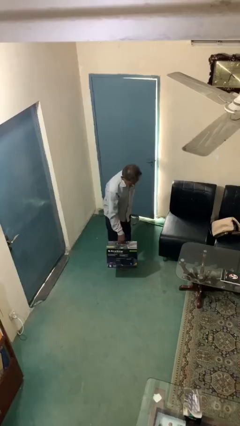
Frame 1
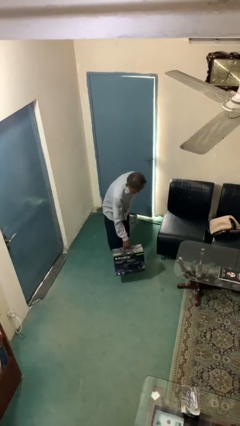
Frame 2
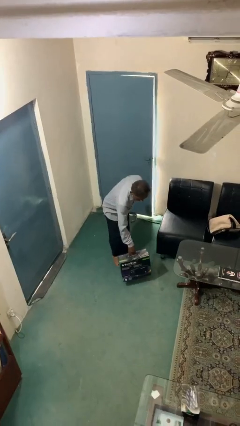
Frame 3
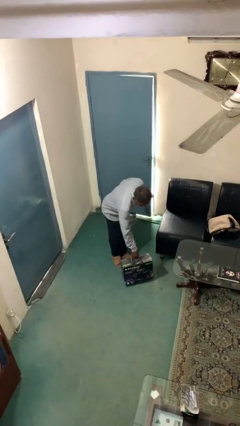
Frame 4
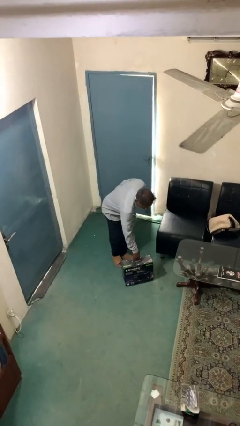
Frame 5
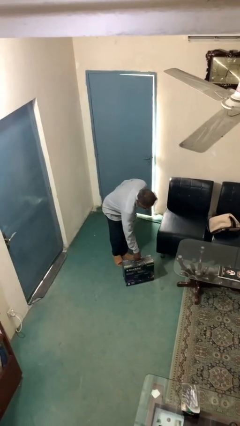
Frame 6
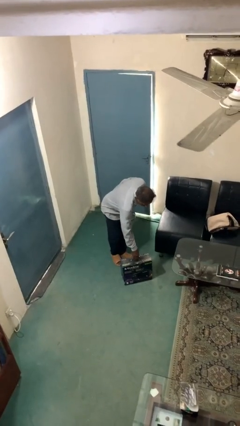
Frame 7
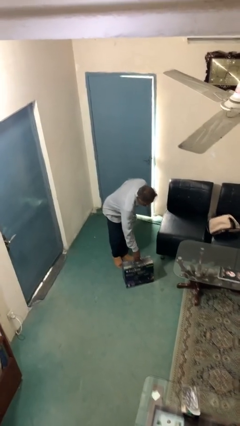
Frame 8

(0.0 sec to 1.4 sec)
person puts down object on floor

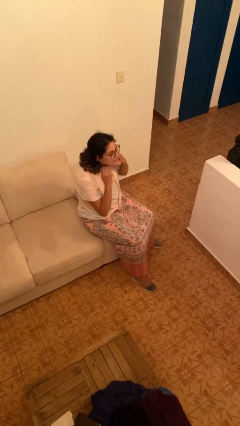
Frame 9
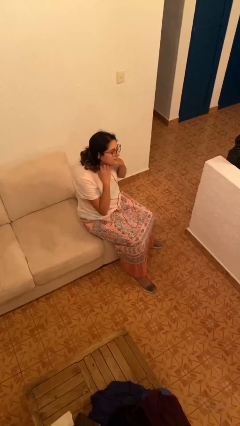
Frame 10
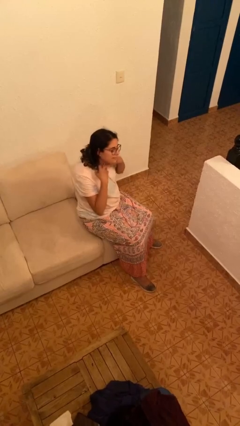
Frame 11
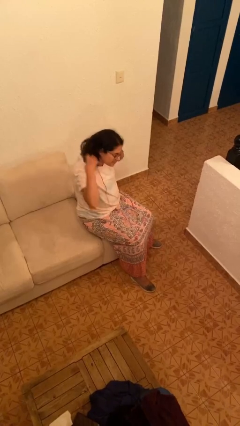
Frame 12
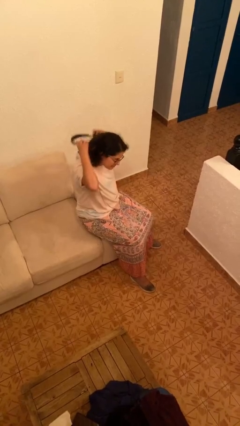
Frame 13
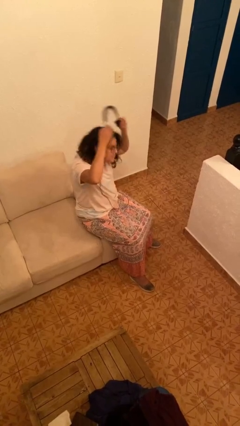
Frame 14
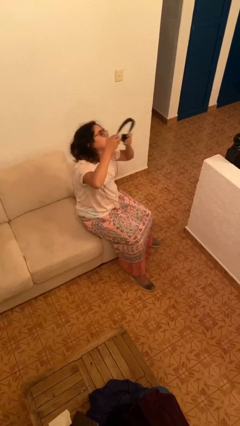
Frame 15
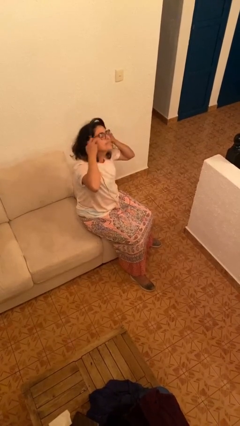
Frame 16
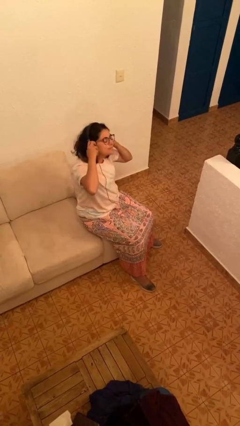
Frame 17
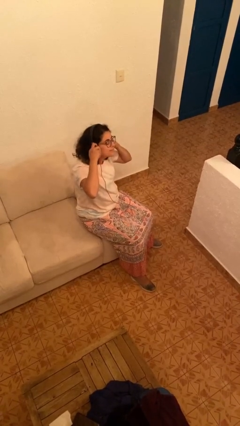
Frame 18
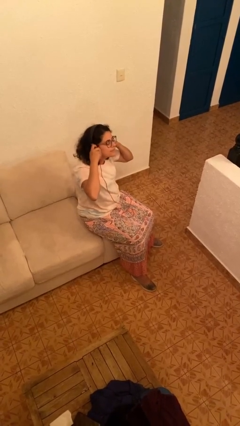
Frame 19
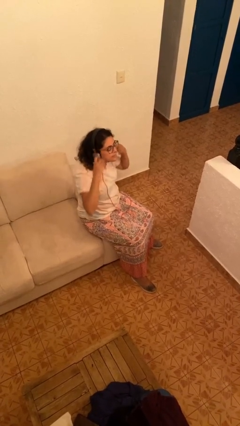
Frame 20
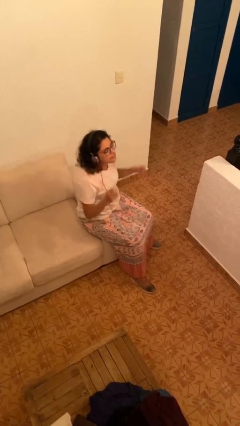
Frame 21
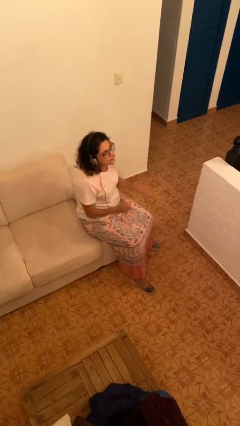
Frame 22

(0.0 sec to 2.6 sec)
person puts on headphones

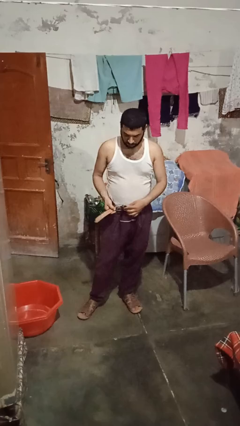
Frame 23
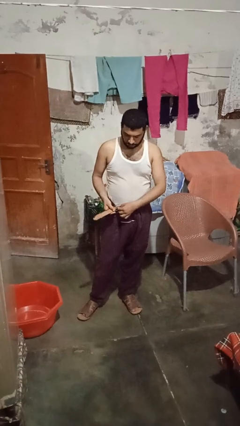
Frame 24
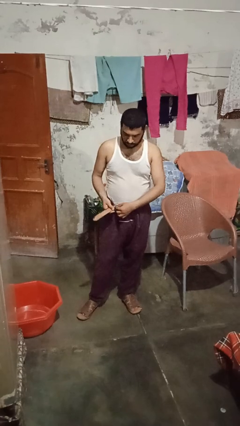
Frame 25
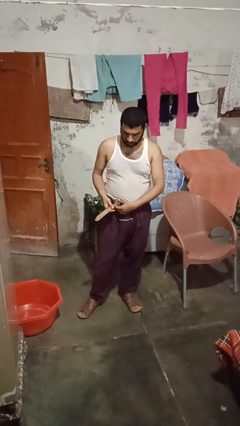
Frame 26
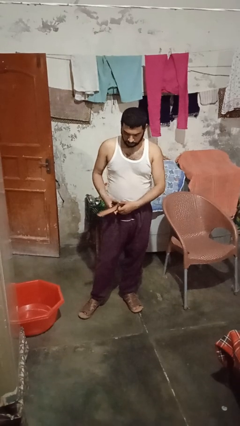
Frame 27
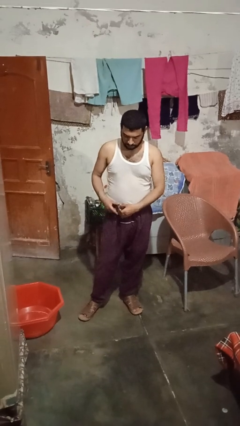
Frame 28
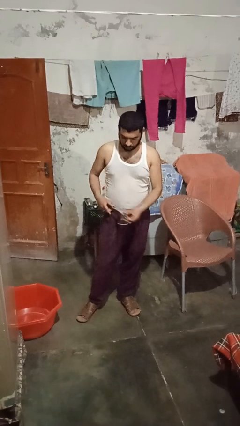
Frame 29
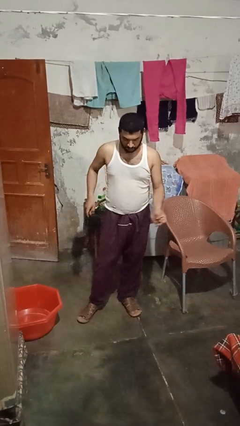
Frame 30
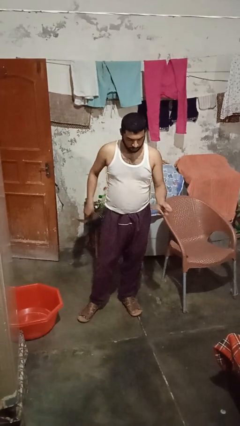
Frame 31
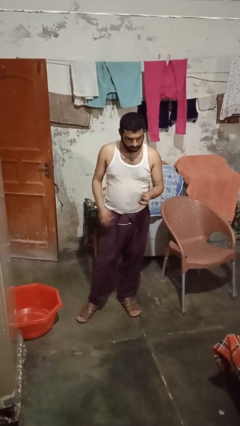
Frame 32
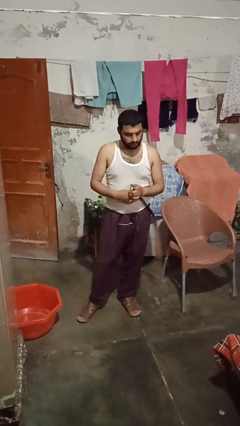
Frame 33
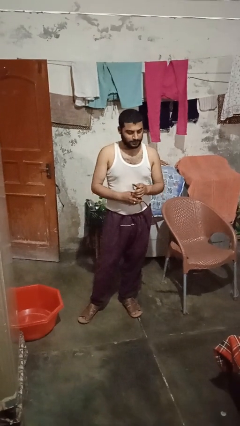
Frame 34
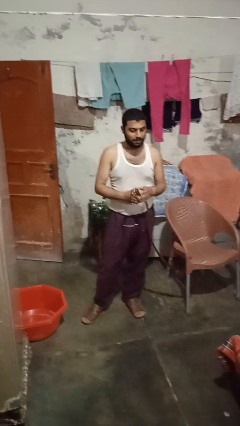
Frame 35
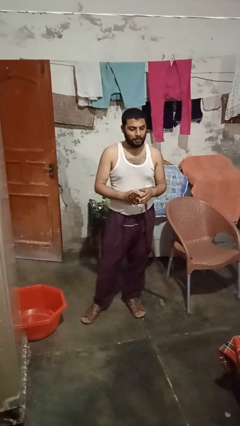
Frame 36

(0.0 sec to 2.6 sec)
person takes off belt

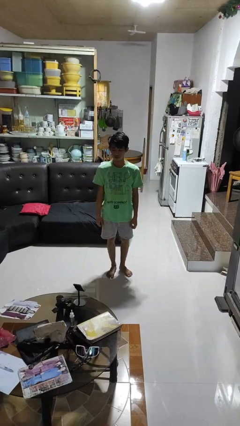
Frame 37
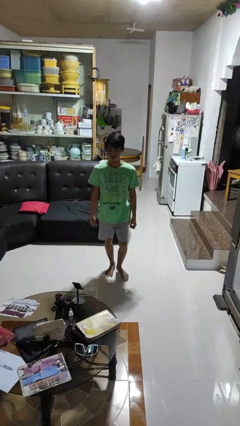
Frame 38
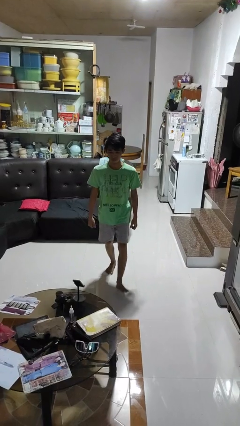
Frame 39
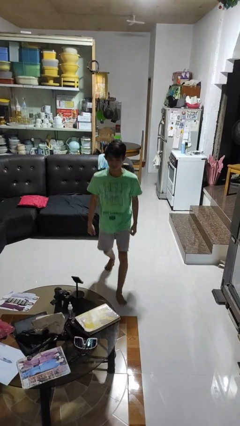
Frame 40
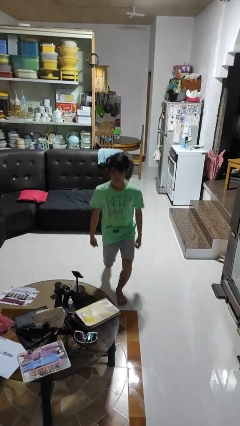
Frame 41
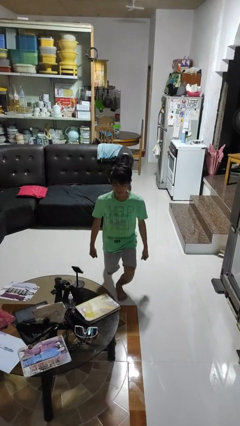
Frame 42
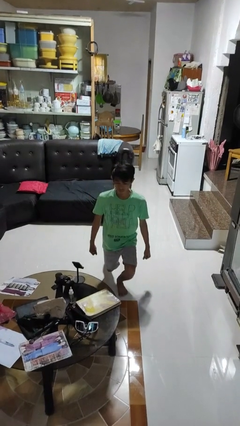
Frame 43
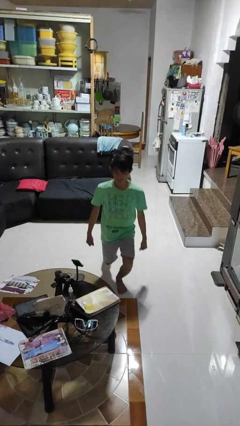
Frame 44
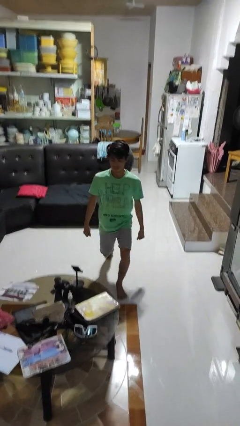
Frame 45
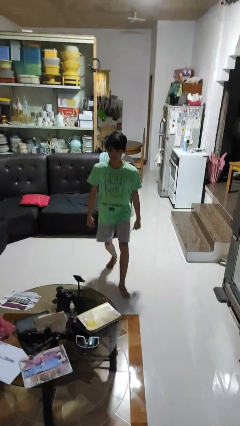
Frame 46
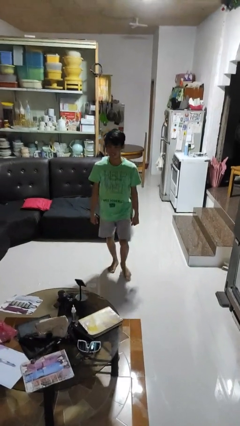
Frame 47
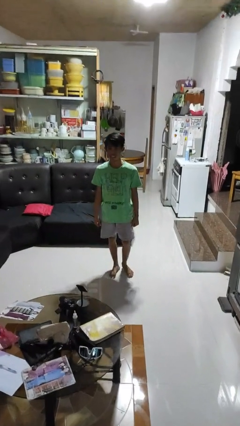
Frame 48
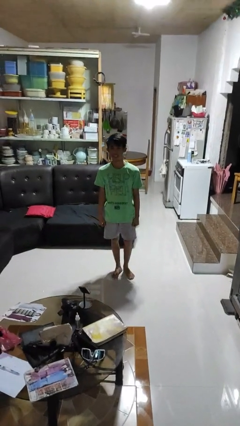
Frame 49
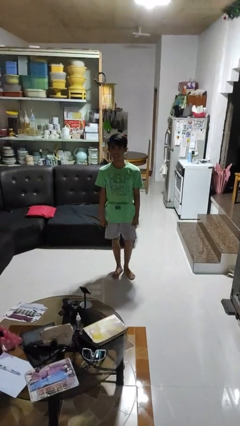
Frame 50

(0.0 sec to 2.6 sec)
person exercises with lunges

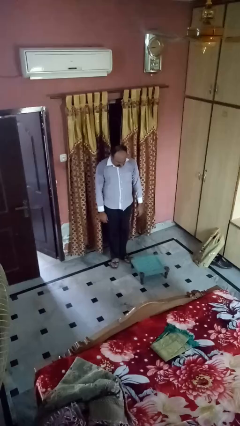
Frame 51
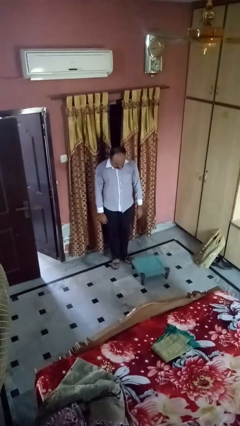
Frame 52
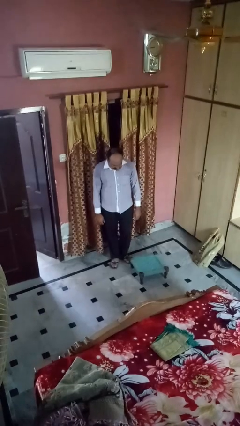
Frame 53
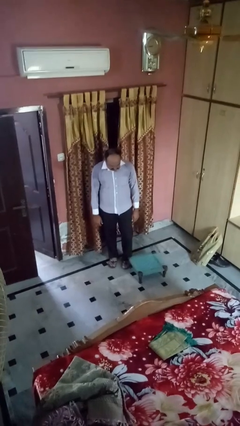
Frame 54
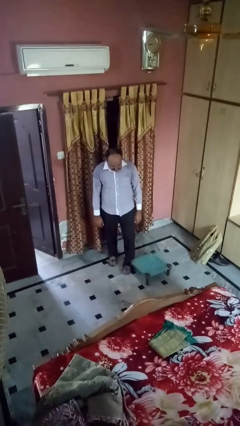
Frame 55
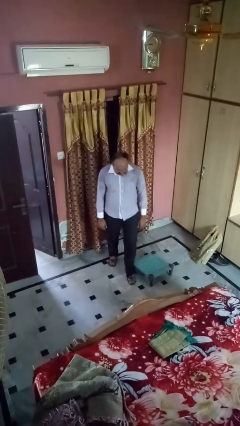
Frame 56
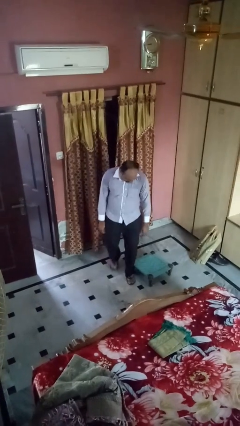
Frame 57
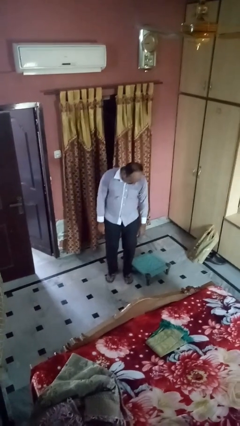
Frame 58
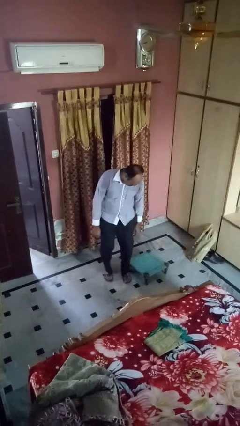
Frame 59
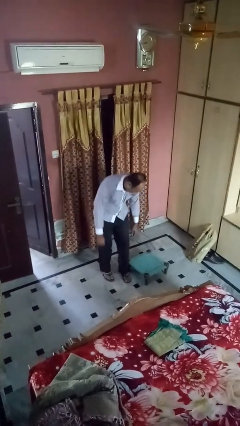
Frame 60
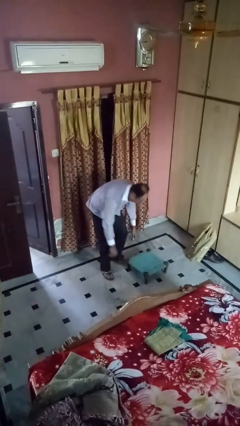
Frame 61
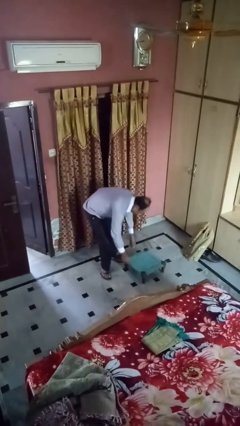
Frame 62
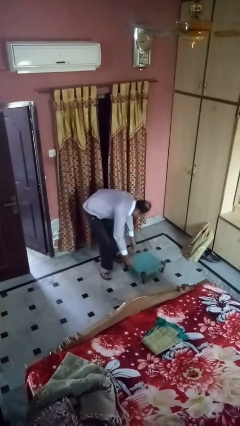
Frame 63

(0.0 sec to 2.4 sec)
person knocks over furniture

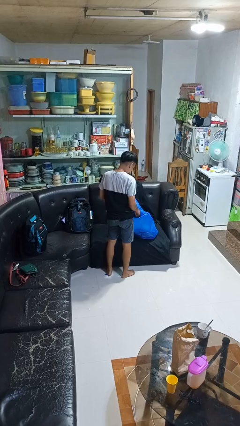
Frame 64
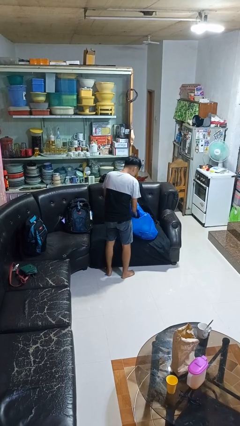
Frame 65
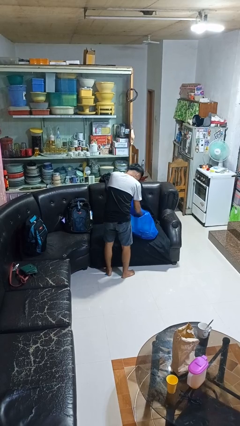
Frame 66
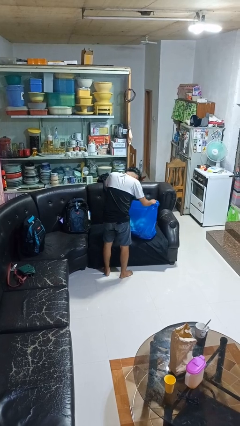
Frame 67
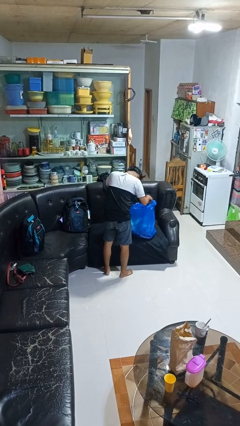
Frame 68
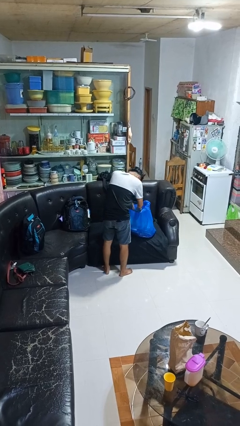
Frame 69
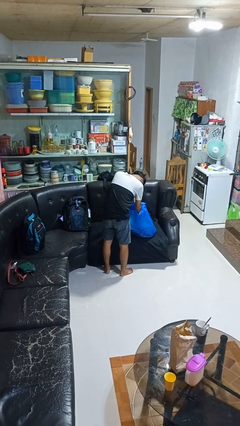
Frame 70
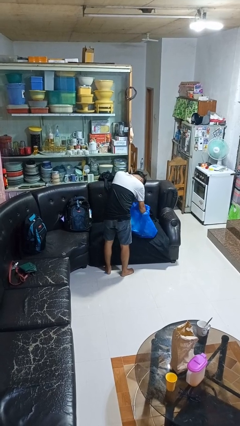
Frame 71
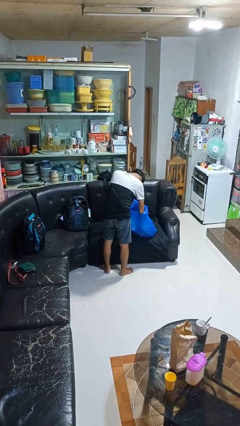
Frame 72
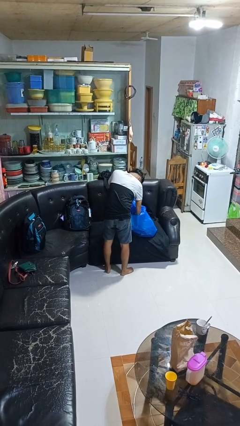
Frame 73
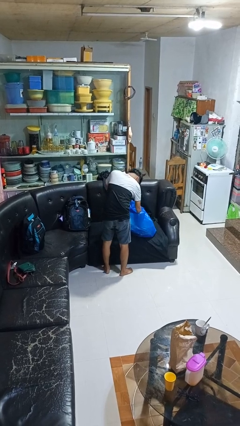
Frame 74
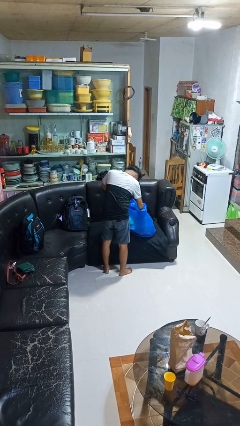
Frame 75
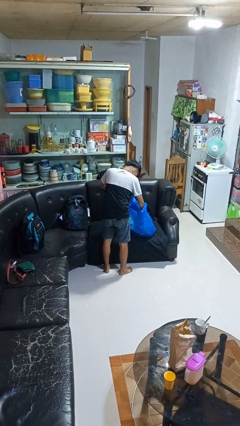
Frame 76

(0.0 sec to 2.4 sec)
person searches in bag

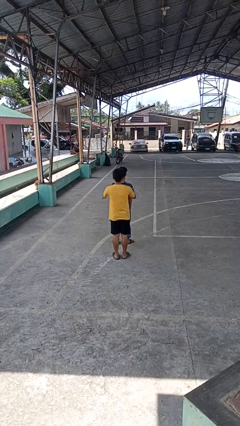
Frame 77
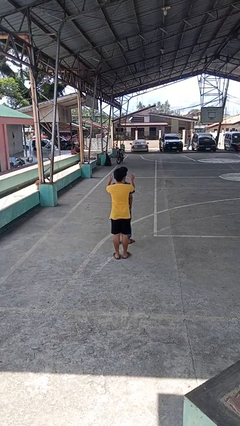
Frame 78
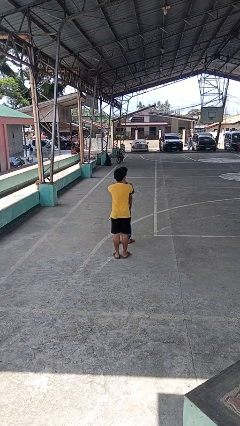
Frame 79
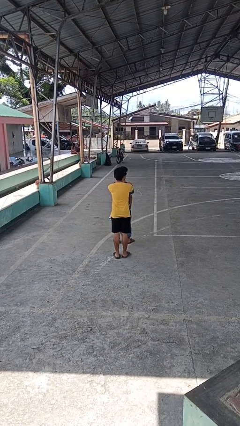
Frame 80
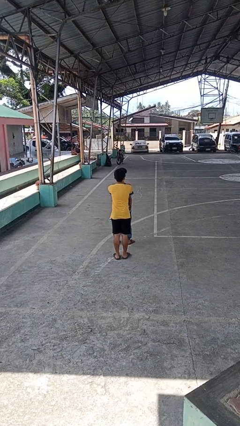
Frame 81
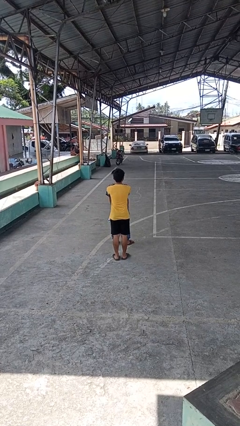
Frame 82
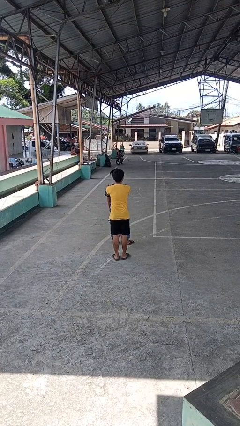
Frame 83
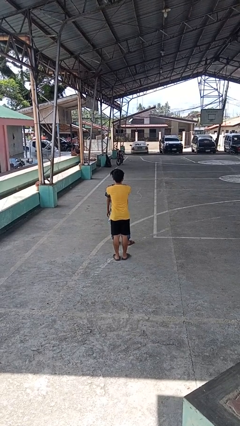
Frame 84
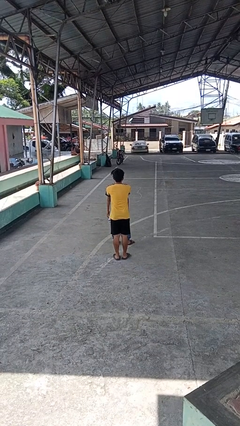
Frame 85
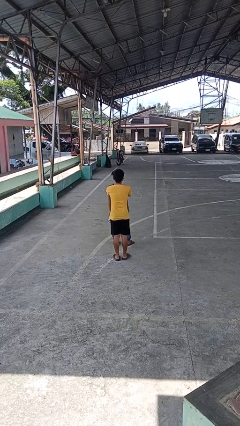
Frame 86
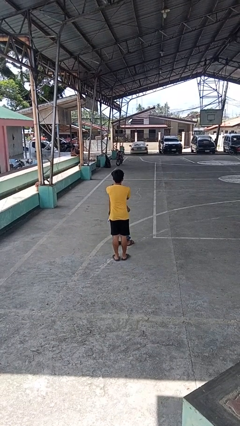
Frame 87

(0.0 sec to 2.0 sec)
person grabs person by shoulder

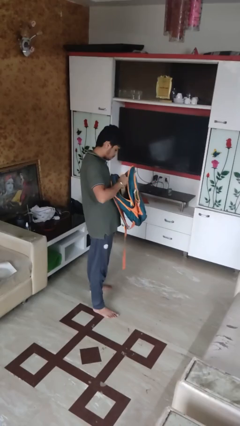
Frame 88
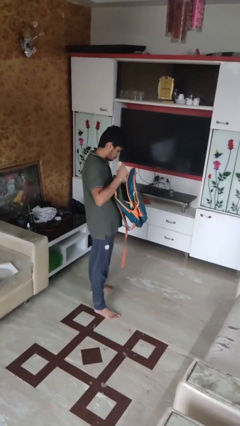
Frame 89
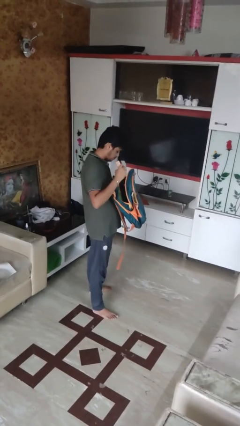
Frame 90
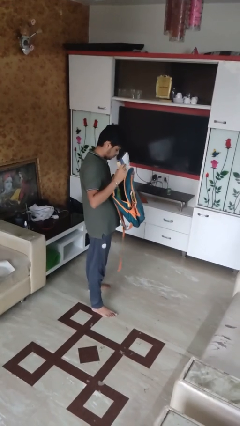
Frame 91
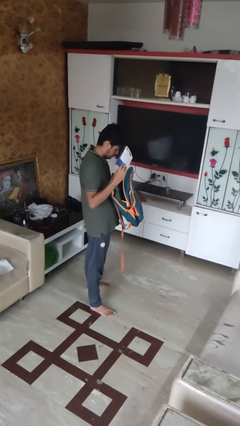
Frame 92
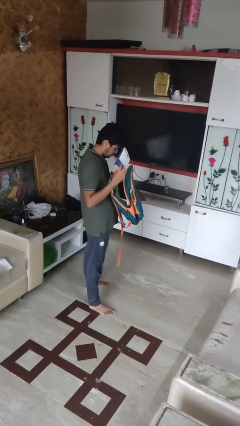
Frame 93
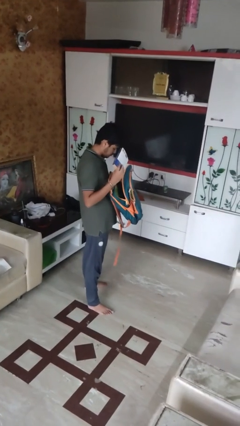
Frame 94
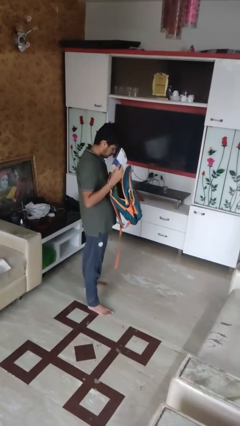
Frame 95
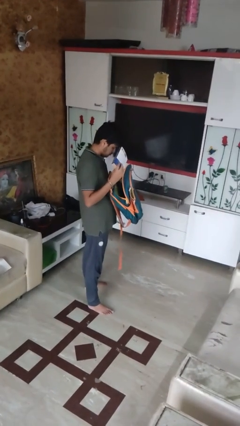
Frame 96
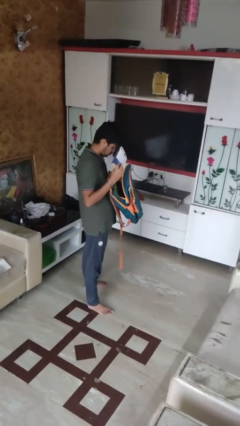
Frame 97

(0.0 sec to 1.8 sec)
person takes object from backpack
